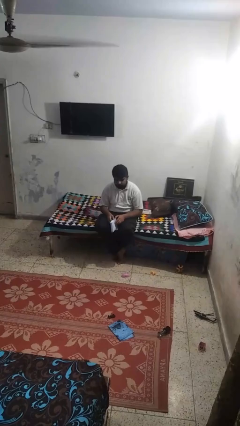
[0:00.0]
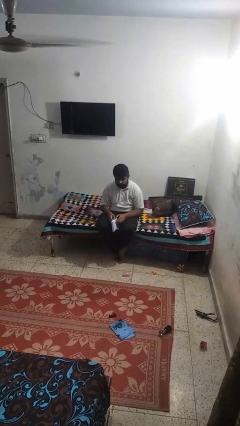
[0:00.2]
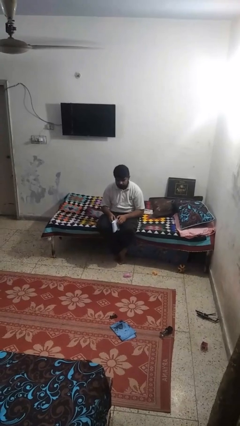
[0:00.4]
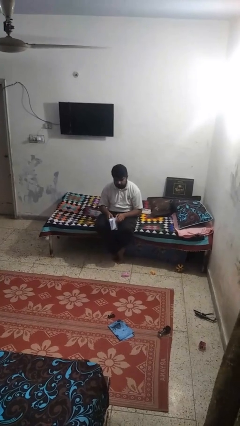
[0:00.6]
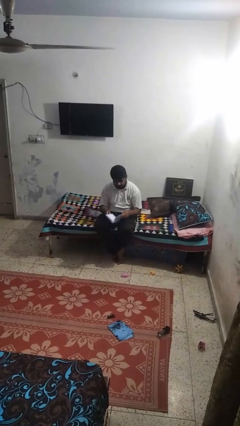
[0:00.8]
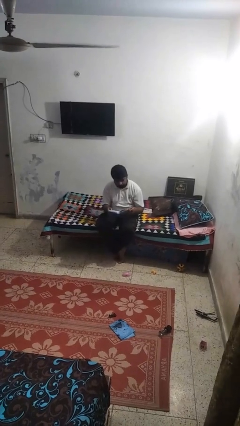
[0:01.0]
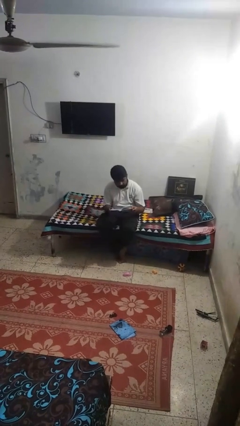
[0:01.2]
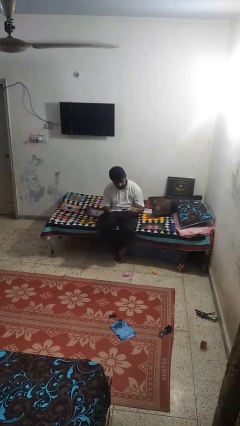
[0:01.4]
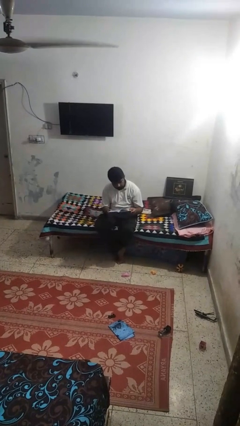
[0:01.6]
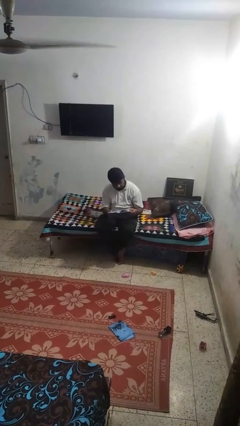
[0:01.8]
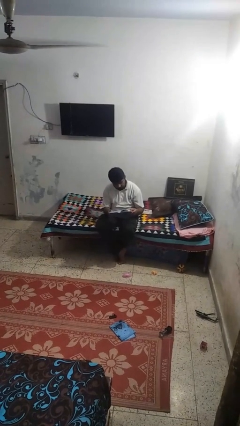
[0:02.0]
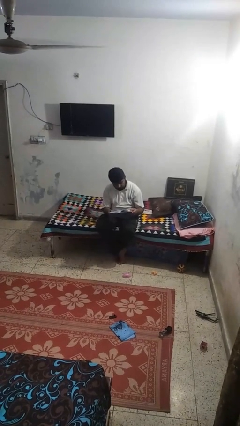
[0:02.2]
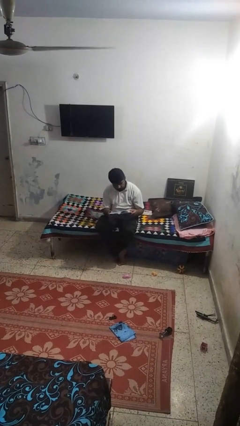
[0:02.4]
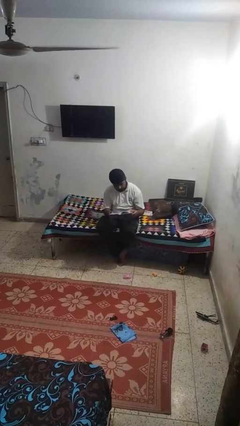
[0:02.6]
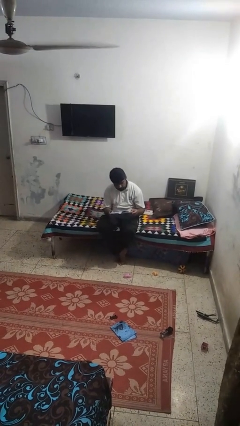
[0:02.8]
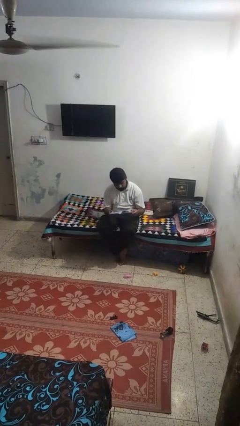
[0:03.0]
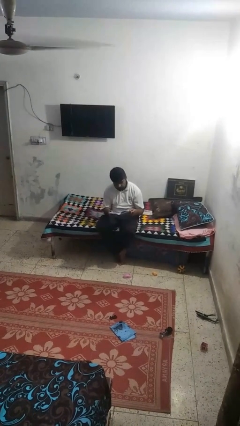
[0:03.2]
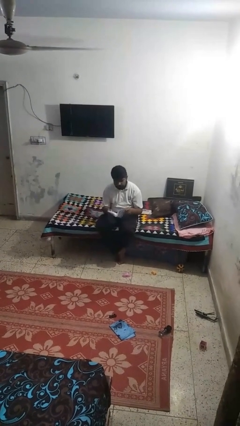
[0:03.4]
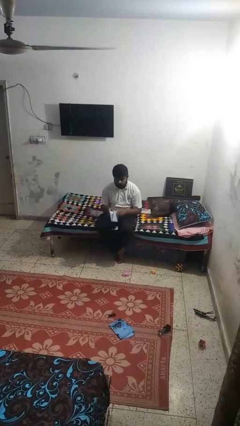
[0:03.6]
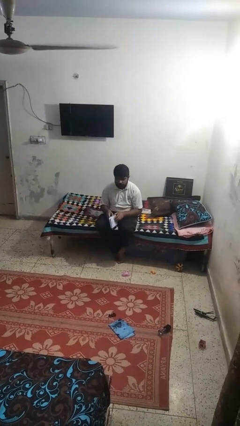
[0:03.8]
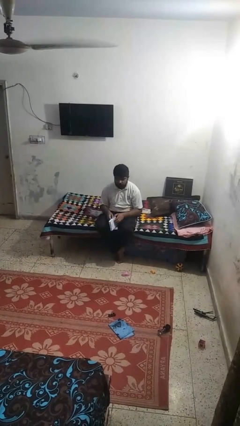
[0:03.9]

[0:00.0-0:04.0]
person reads book

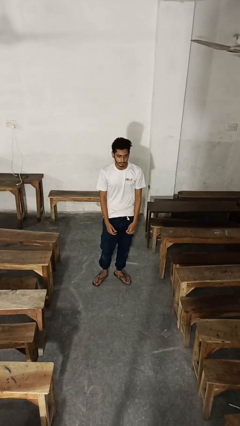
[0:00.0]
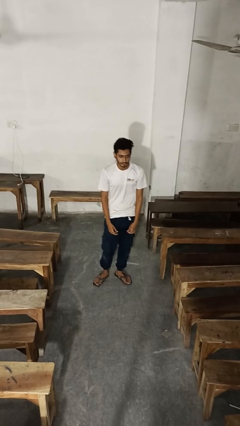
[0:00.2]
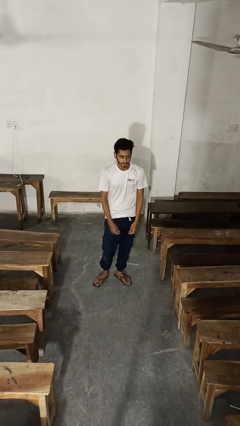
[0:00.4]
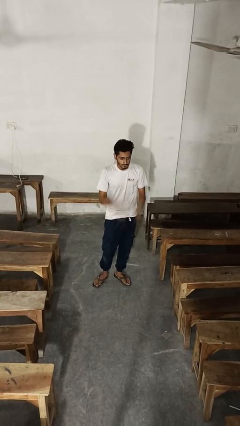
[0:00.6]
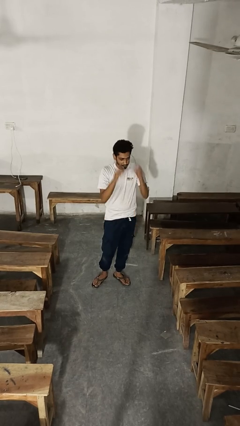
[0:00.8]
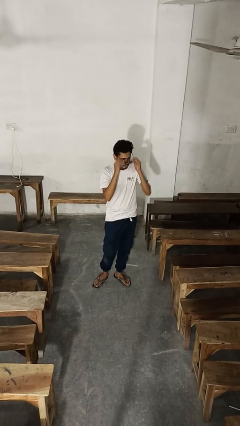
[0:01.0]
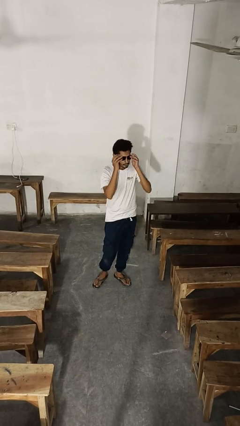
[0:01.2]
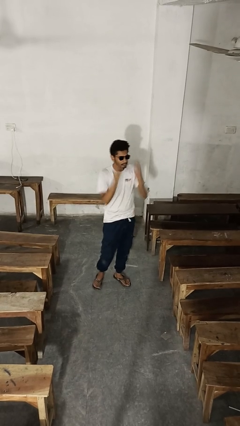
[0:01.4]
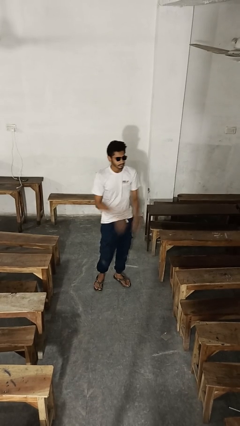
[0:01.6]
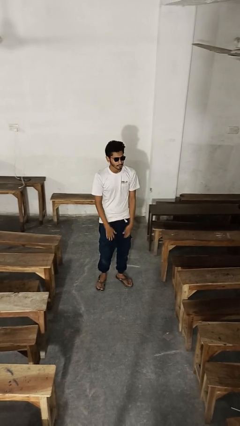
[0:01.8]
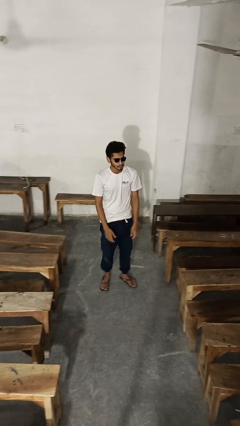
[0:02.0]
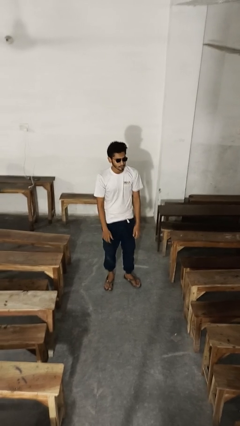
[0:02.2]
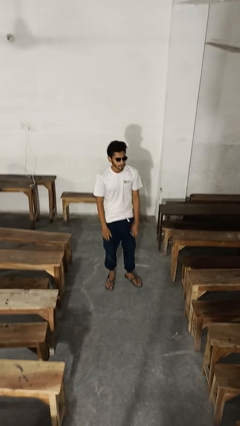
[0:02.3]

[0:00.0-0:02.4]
person puts on sunglasses

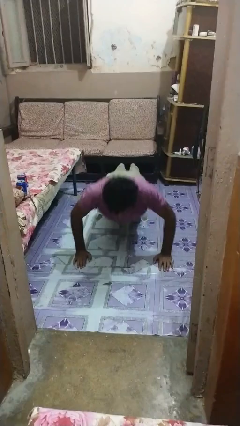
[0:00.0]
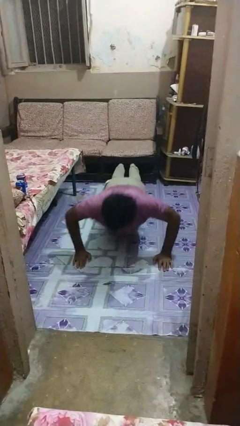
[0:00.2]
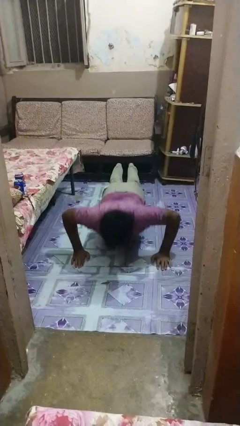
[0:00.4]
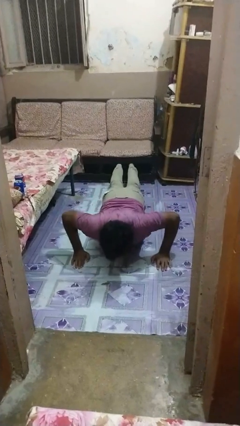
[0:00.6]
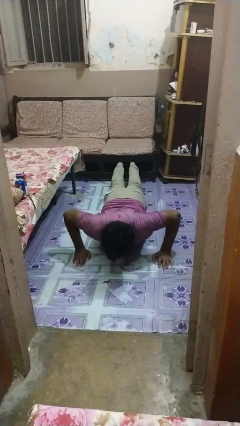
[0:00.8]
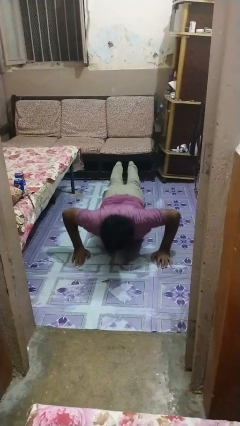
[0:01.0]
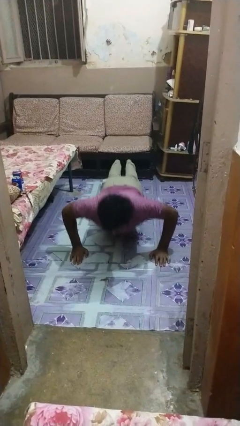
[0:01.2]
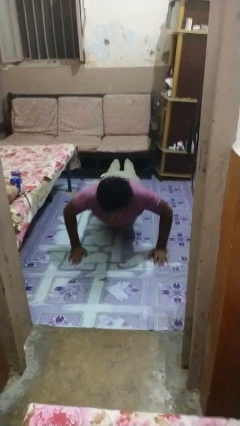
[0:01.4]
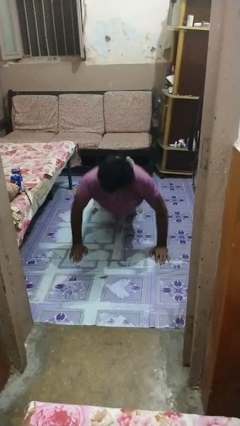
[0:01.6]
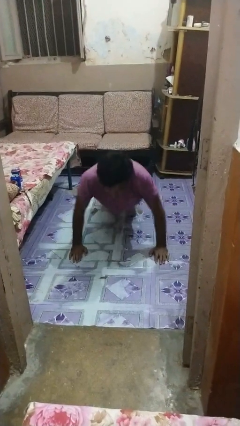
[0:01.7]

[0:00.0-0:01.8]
person exercises with pushup

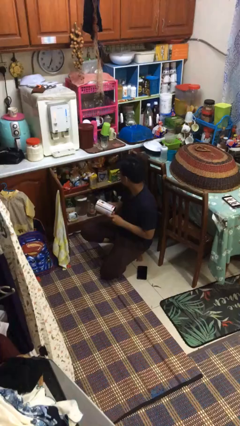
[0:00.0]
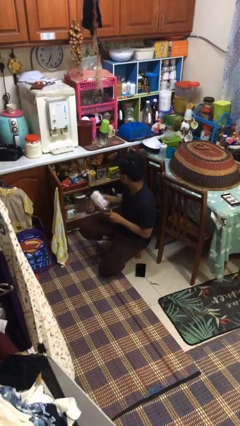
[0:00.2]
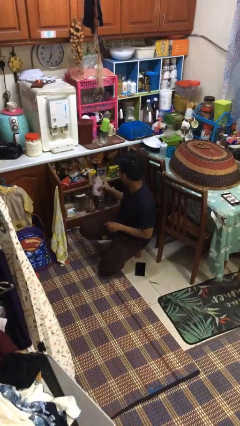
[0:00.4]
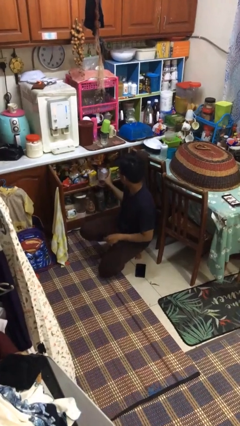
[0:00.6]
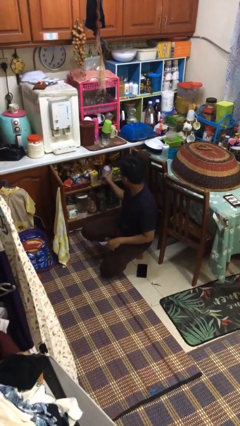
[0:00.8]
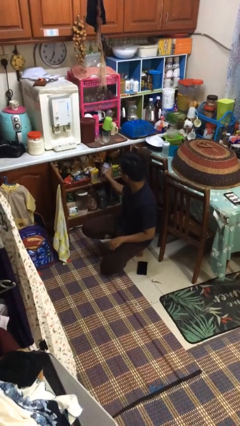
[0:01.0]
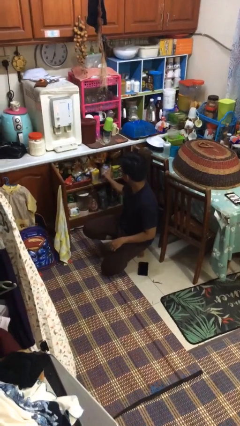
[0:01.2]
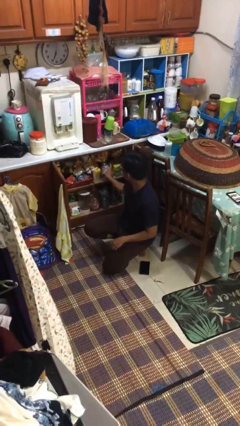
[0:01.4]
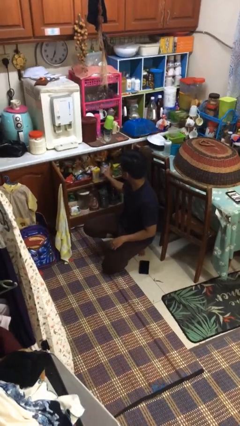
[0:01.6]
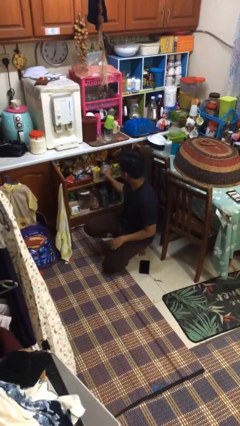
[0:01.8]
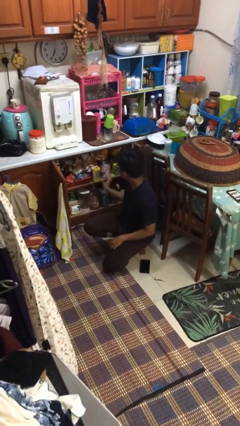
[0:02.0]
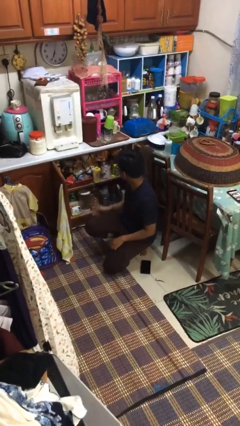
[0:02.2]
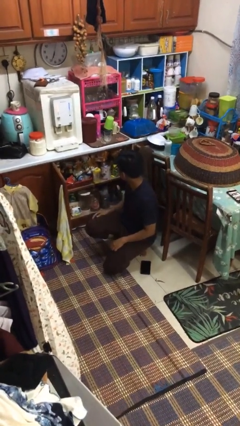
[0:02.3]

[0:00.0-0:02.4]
person puts object in cabinet

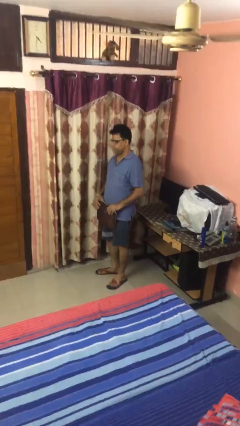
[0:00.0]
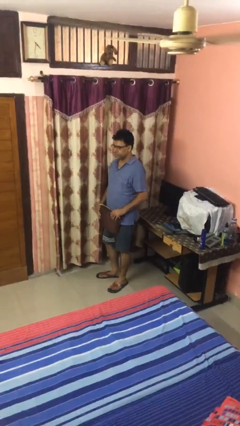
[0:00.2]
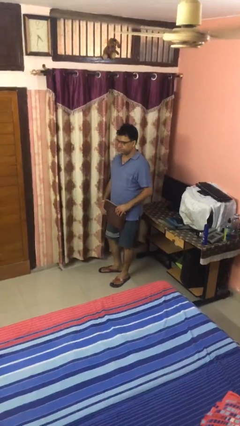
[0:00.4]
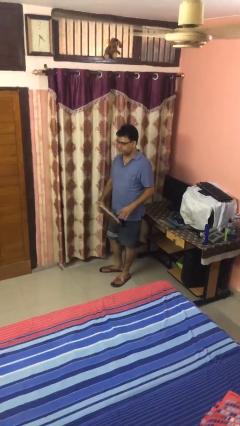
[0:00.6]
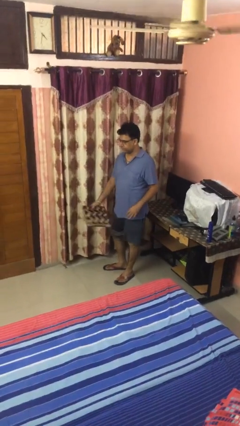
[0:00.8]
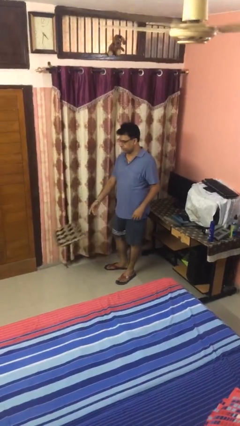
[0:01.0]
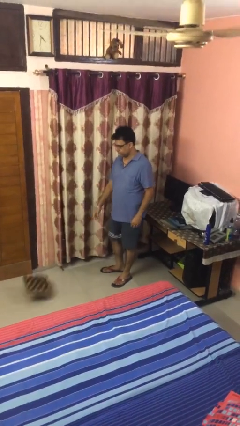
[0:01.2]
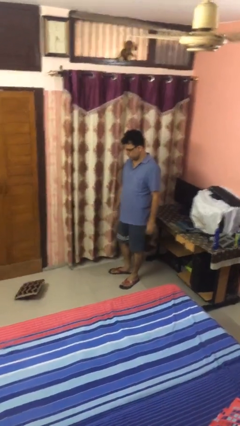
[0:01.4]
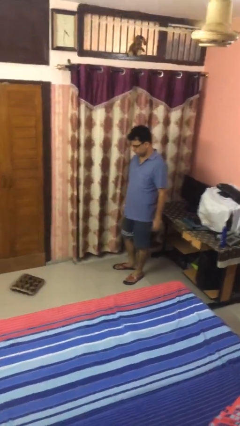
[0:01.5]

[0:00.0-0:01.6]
person throws object to ground

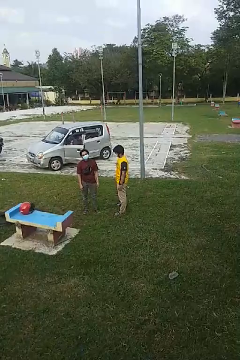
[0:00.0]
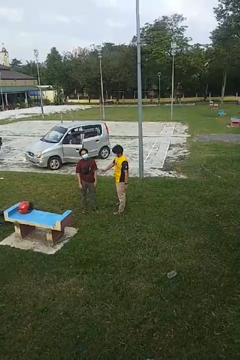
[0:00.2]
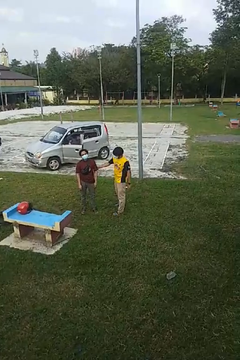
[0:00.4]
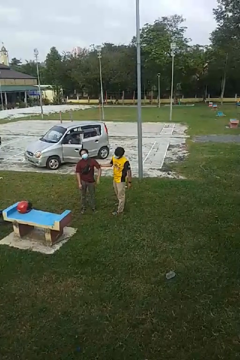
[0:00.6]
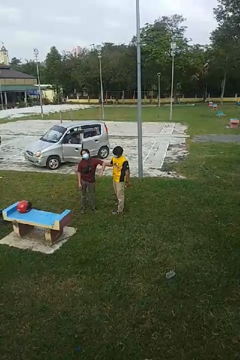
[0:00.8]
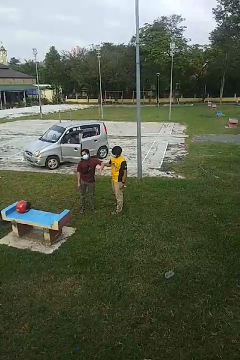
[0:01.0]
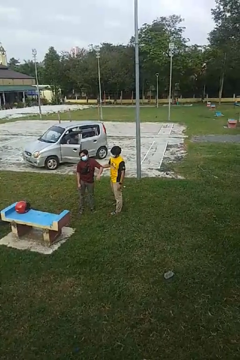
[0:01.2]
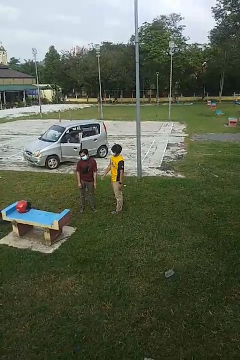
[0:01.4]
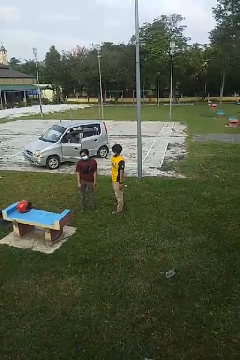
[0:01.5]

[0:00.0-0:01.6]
person grabs person by bicep

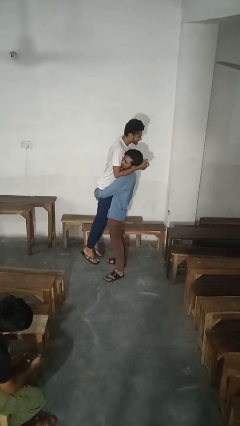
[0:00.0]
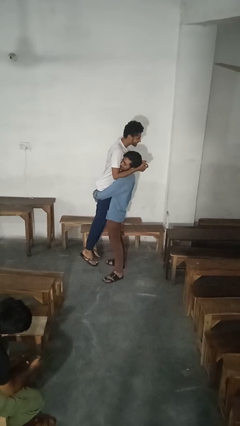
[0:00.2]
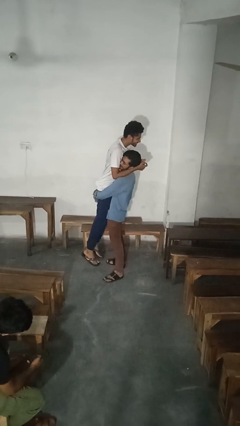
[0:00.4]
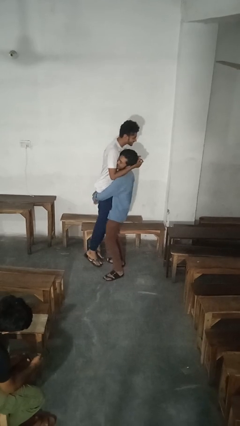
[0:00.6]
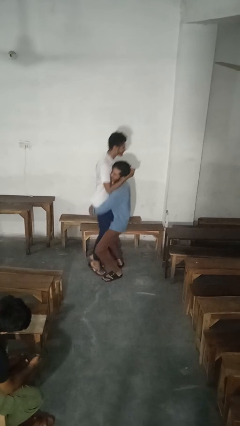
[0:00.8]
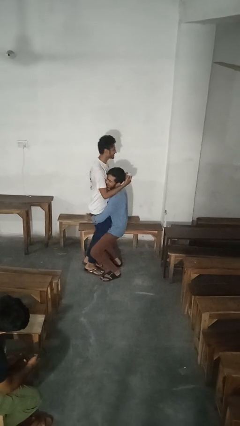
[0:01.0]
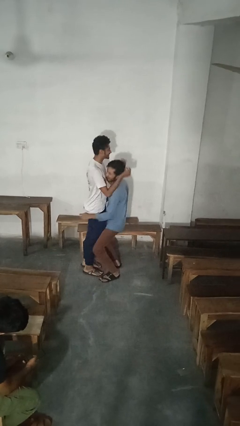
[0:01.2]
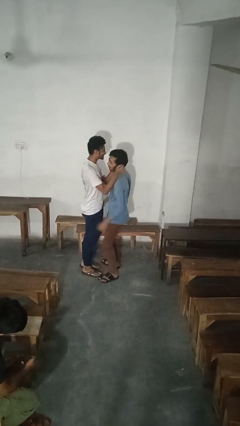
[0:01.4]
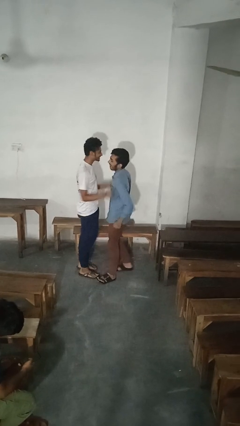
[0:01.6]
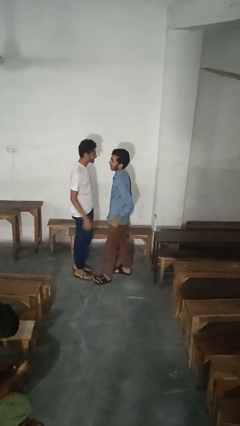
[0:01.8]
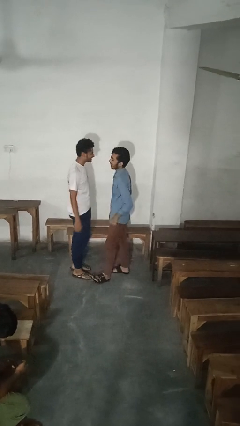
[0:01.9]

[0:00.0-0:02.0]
person puts down person

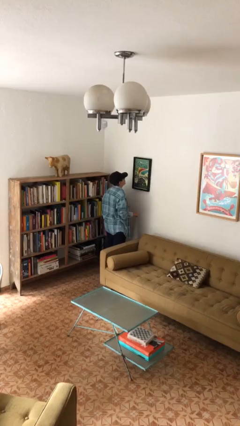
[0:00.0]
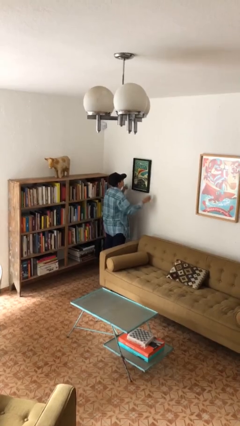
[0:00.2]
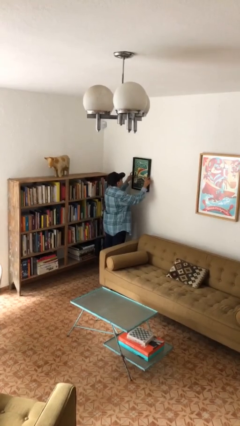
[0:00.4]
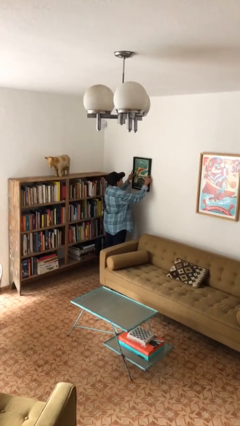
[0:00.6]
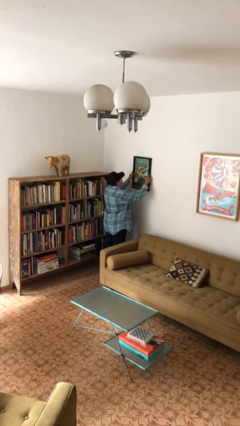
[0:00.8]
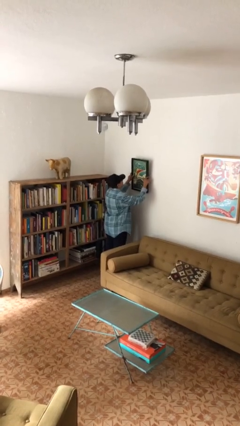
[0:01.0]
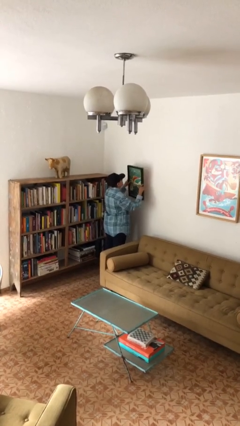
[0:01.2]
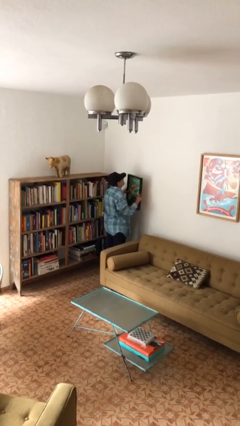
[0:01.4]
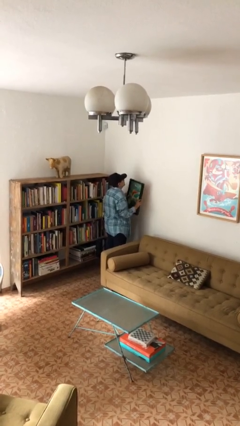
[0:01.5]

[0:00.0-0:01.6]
person takes down picture frame
